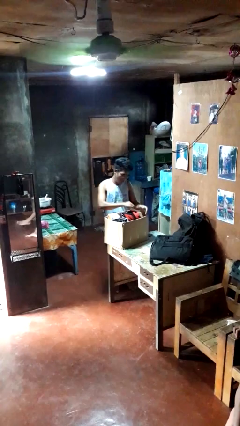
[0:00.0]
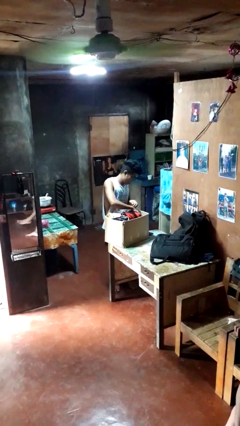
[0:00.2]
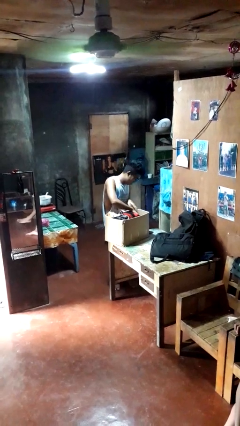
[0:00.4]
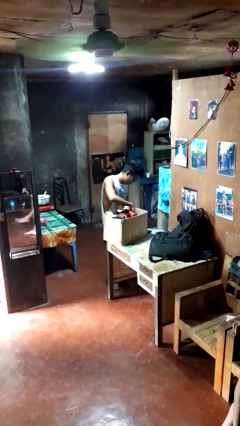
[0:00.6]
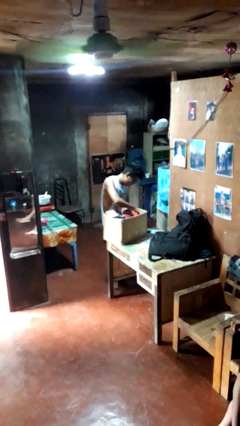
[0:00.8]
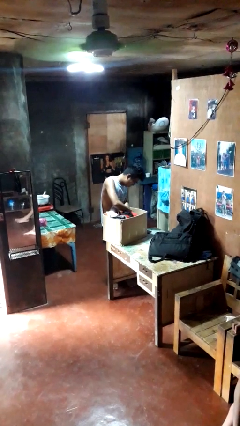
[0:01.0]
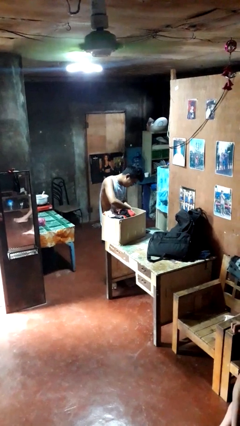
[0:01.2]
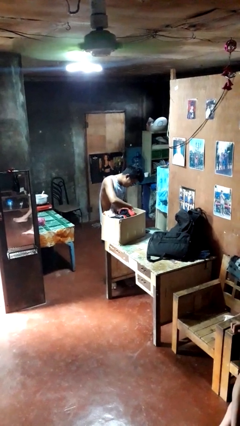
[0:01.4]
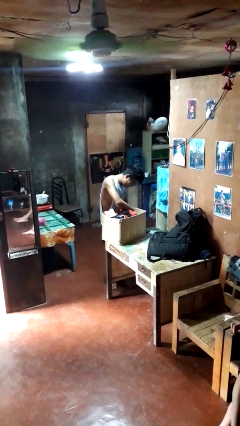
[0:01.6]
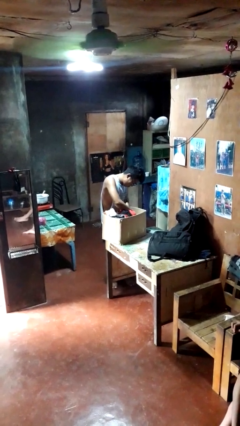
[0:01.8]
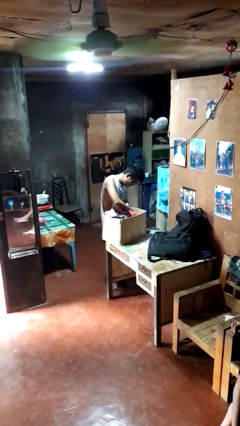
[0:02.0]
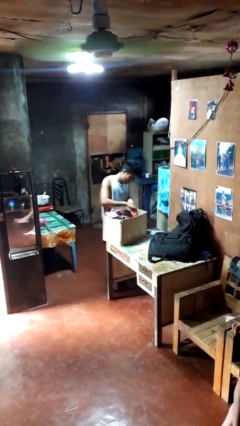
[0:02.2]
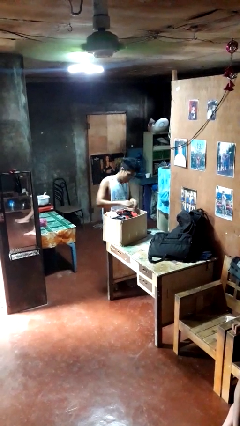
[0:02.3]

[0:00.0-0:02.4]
person searches in box

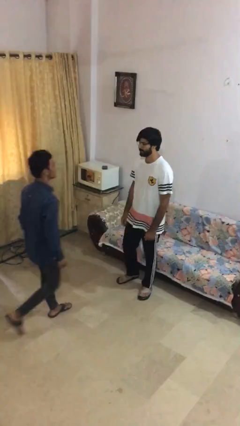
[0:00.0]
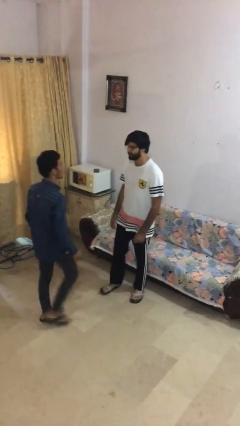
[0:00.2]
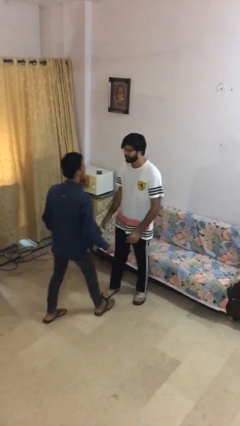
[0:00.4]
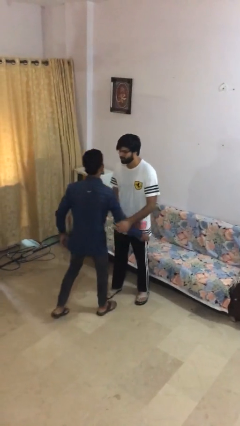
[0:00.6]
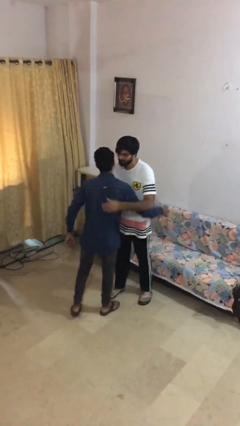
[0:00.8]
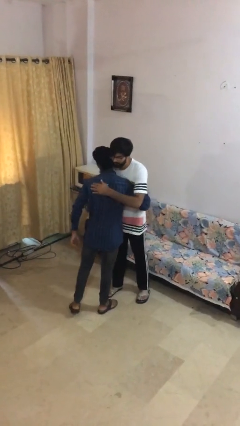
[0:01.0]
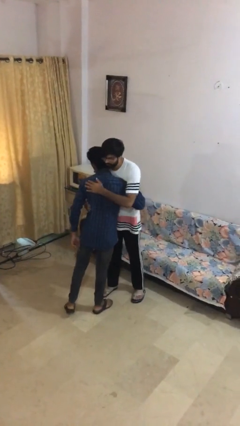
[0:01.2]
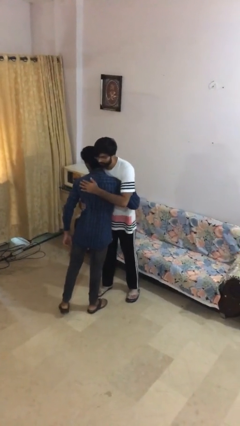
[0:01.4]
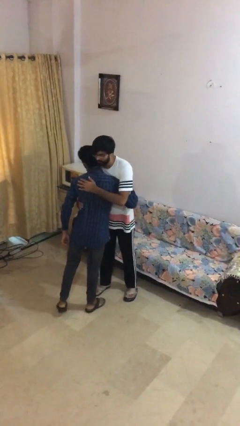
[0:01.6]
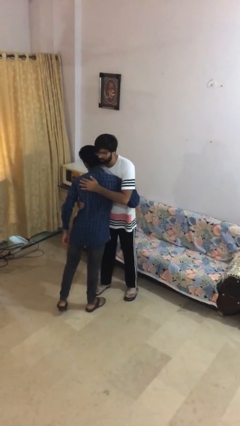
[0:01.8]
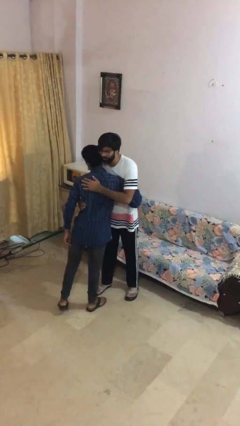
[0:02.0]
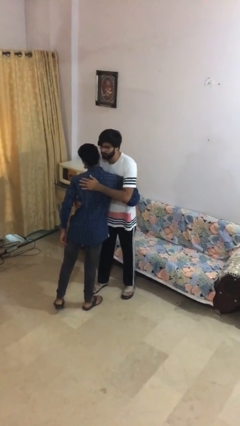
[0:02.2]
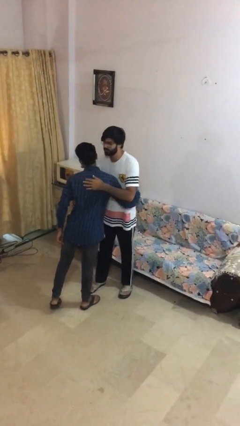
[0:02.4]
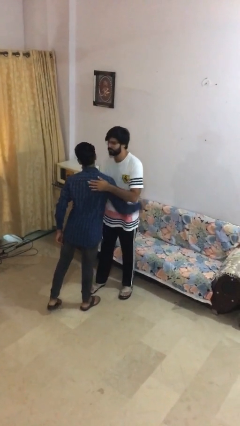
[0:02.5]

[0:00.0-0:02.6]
person embraces person

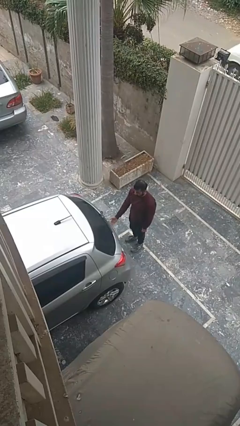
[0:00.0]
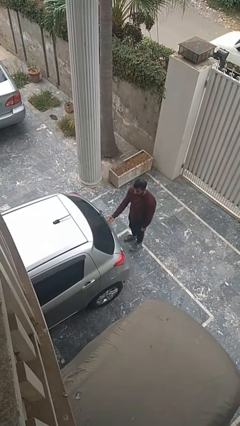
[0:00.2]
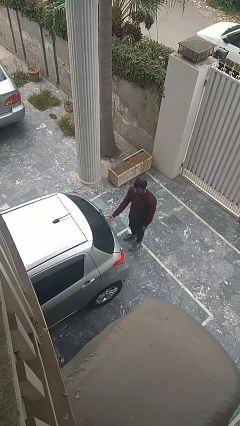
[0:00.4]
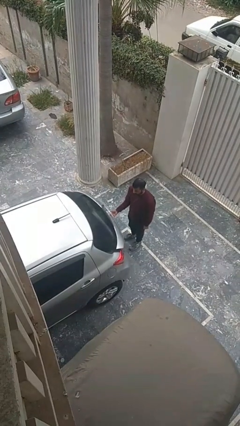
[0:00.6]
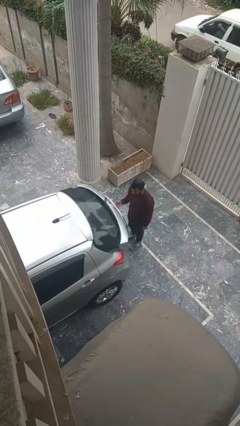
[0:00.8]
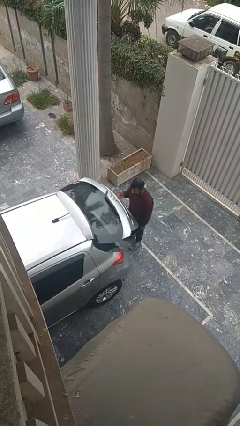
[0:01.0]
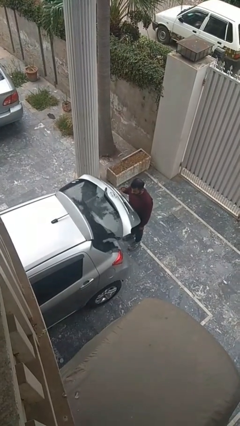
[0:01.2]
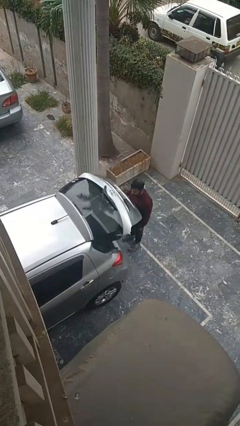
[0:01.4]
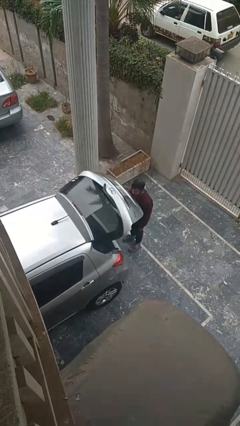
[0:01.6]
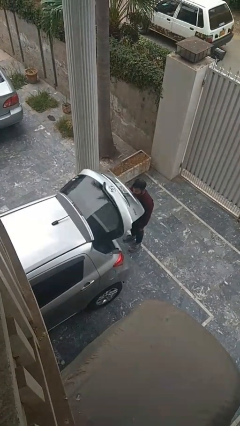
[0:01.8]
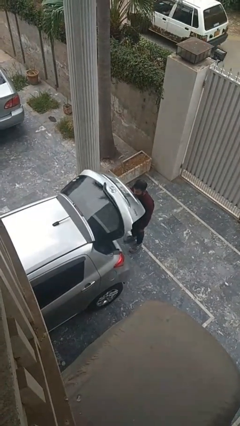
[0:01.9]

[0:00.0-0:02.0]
person opens car trunk

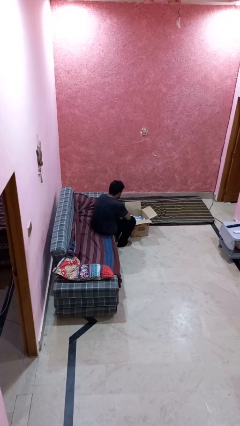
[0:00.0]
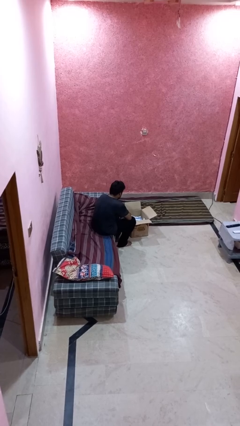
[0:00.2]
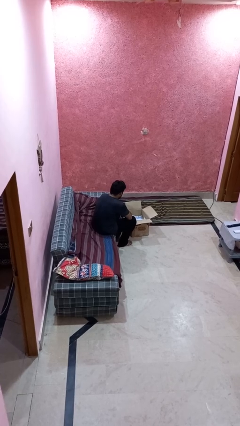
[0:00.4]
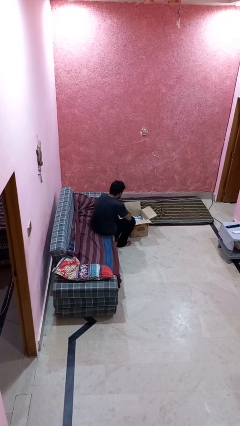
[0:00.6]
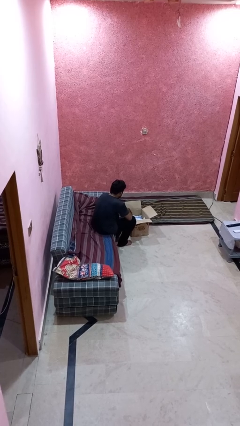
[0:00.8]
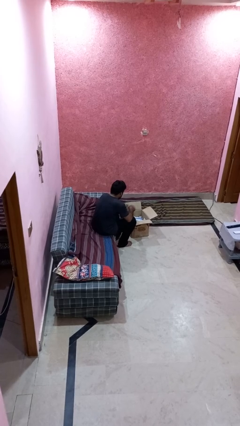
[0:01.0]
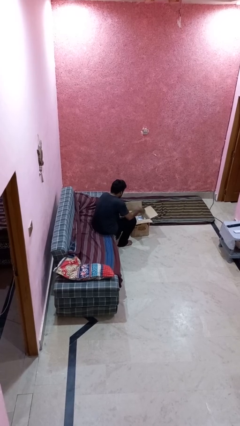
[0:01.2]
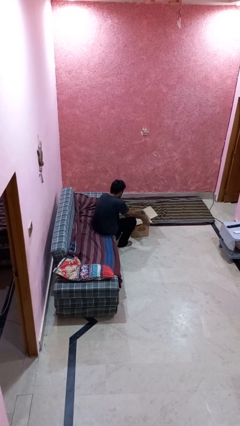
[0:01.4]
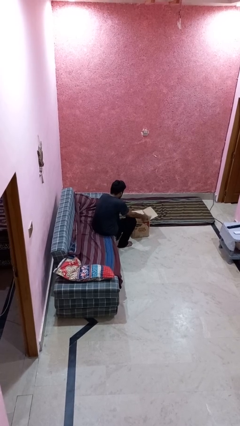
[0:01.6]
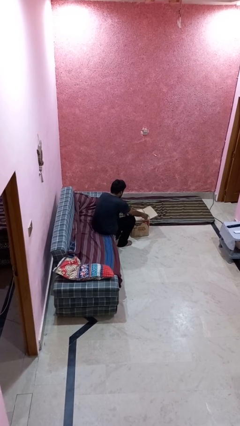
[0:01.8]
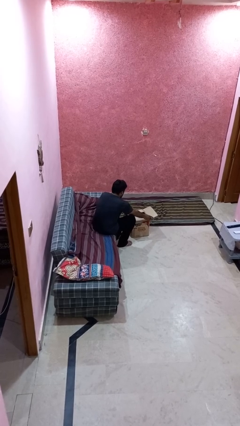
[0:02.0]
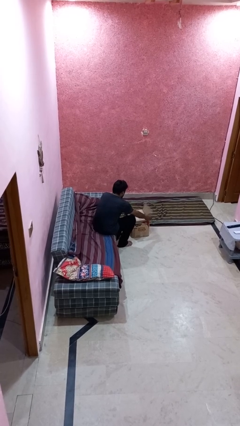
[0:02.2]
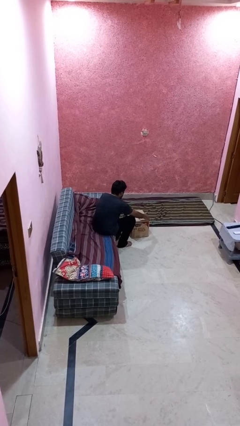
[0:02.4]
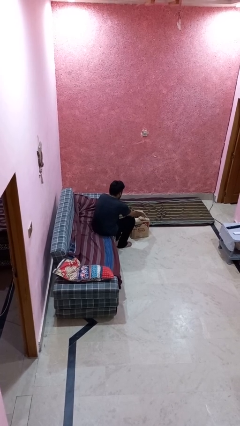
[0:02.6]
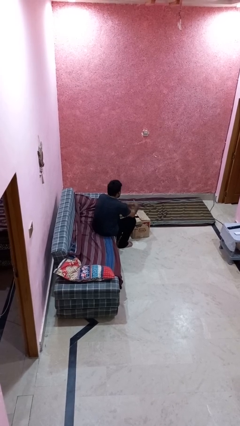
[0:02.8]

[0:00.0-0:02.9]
person closes box

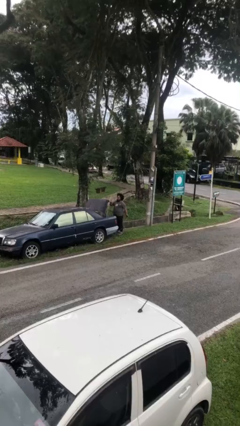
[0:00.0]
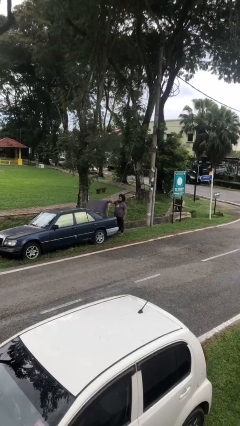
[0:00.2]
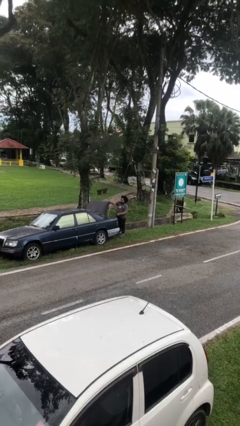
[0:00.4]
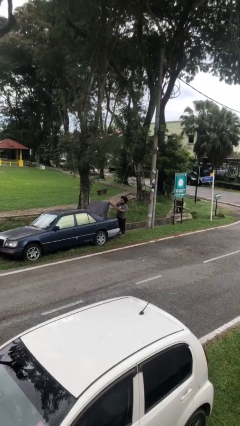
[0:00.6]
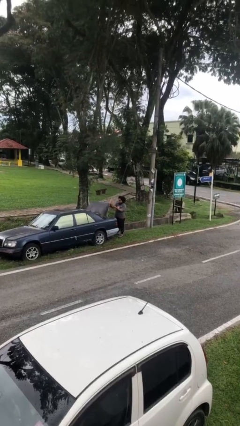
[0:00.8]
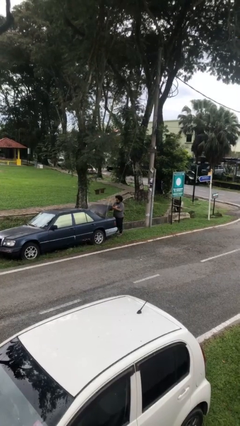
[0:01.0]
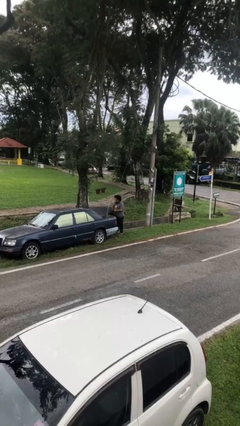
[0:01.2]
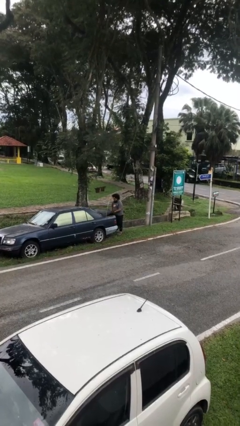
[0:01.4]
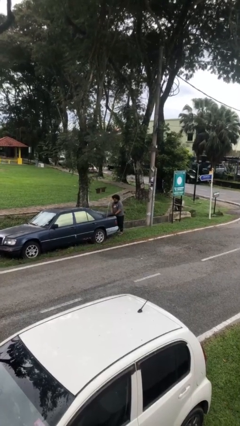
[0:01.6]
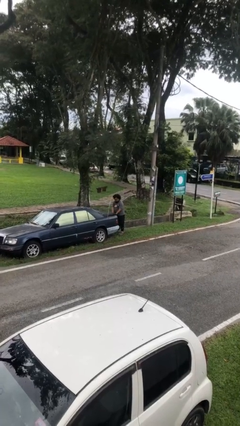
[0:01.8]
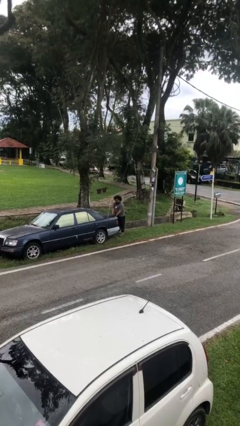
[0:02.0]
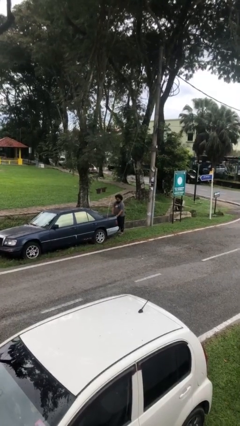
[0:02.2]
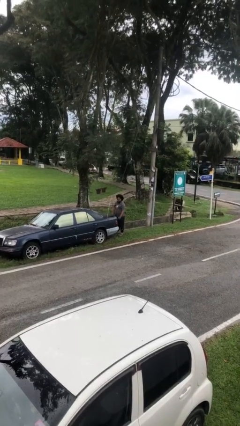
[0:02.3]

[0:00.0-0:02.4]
person closes car trunk

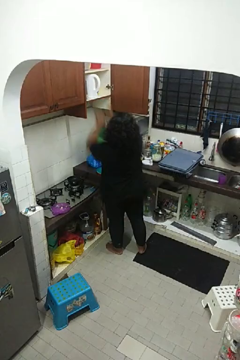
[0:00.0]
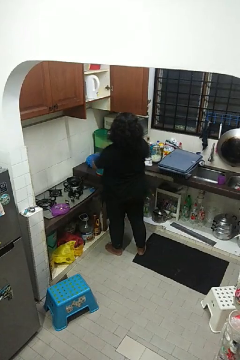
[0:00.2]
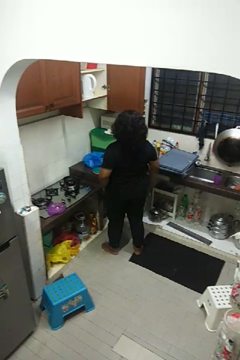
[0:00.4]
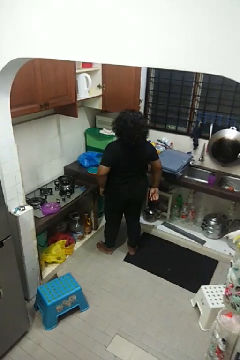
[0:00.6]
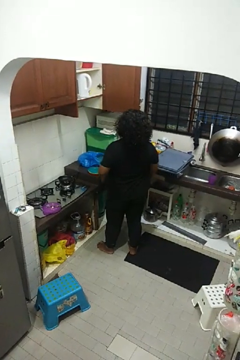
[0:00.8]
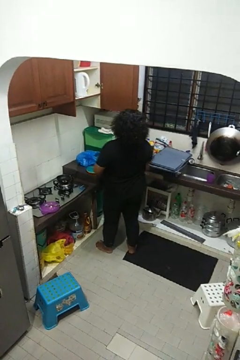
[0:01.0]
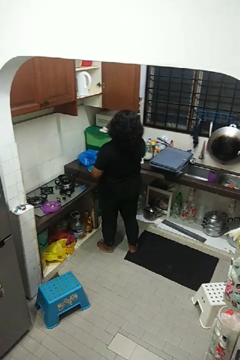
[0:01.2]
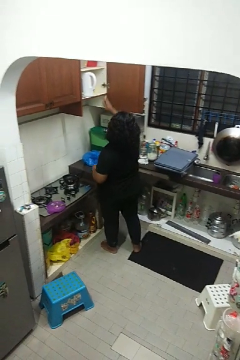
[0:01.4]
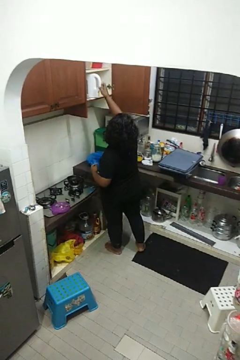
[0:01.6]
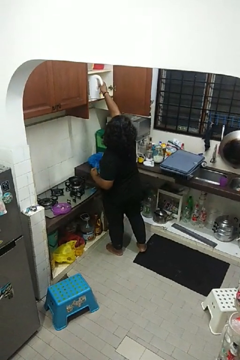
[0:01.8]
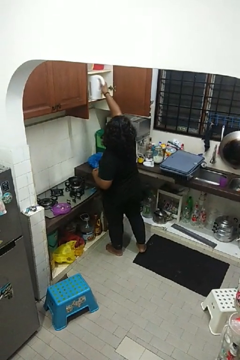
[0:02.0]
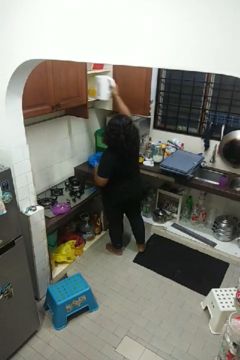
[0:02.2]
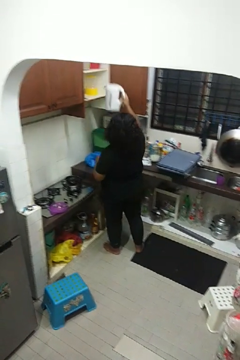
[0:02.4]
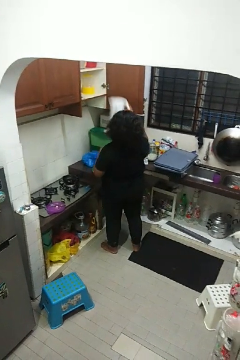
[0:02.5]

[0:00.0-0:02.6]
person takes object from cabinet

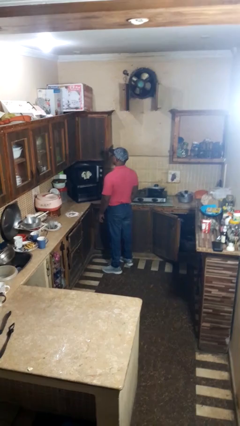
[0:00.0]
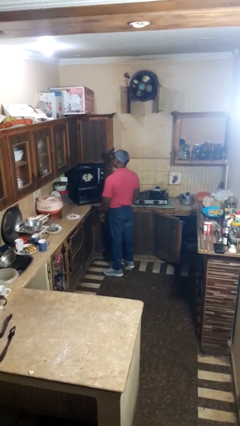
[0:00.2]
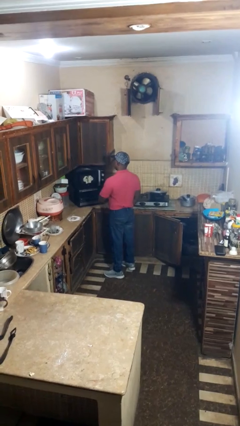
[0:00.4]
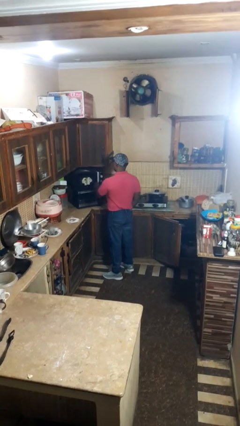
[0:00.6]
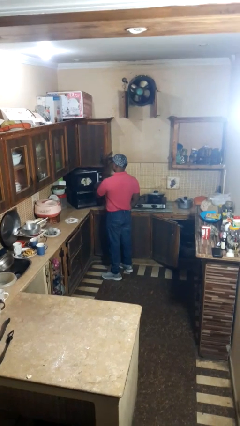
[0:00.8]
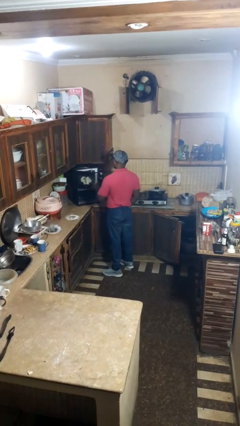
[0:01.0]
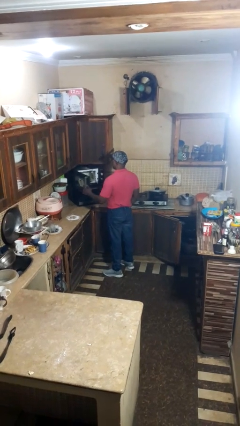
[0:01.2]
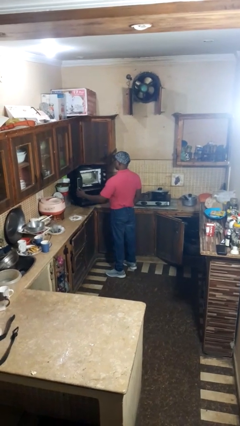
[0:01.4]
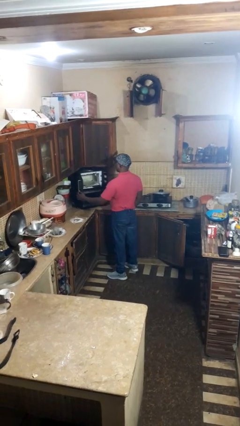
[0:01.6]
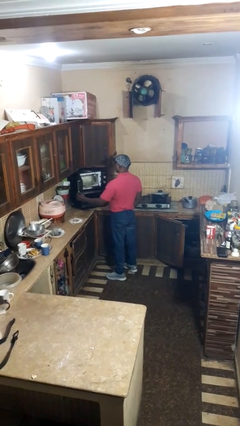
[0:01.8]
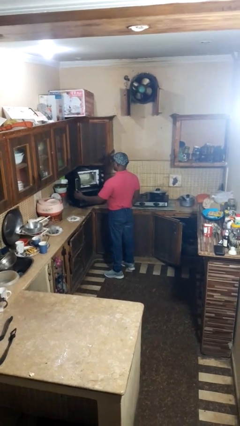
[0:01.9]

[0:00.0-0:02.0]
person opens microwave
